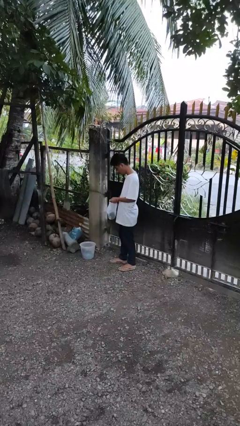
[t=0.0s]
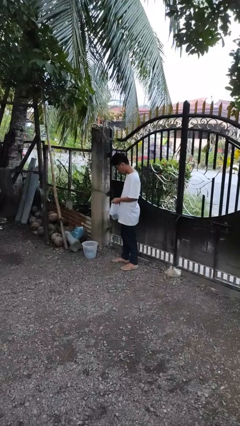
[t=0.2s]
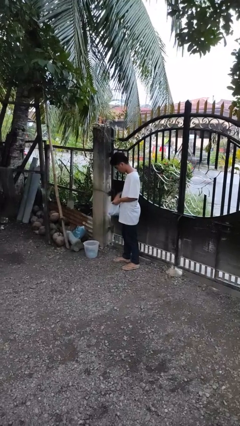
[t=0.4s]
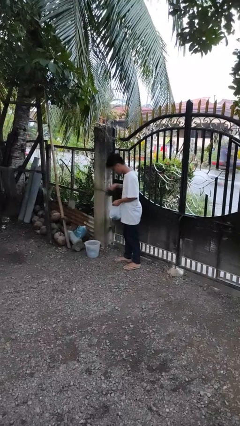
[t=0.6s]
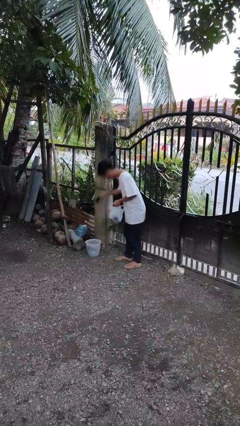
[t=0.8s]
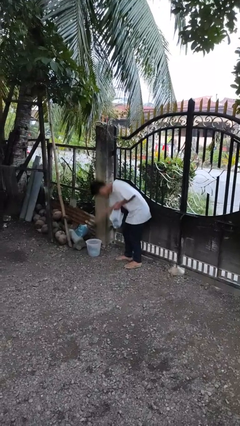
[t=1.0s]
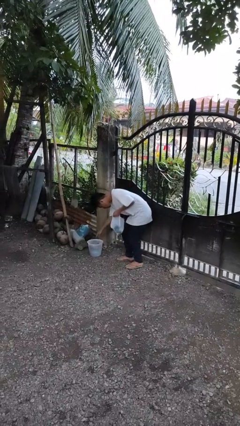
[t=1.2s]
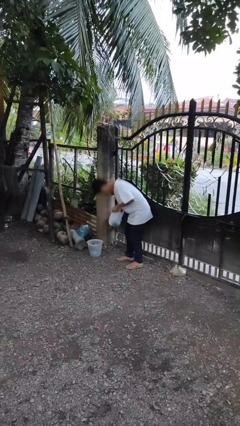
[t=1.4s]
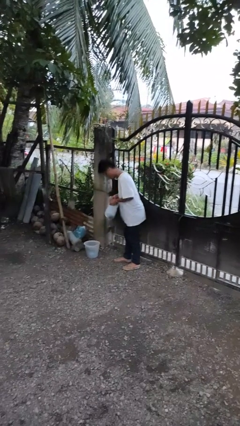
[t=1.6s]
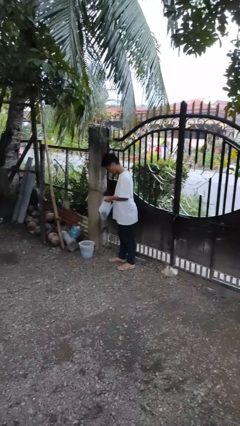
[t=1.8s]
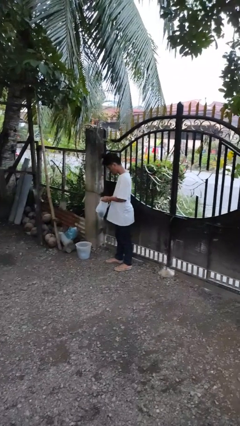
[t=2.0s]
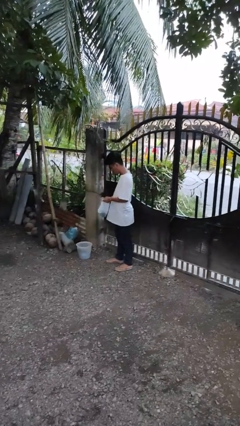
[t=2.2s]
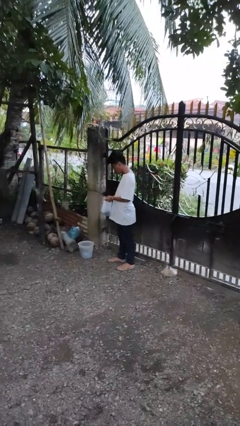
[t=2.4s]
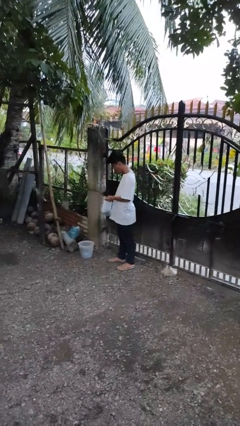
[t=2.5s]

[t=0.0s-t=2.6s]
person discards trash

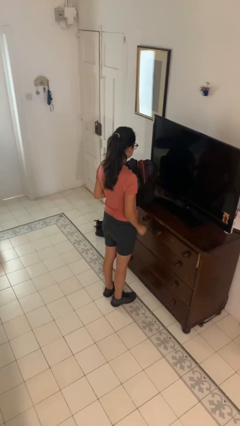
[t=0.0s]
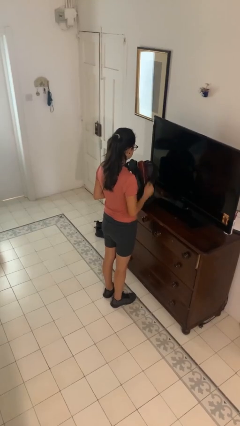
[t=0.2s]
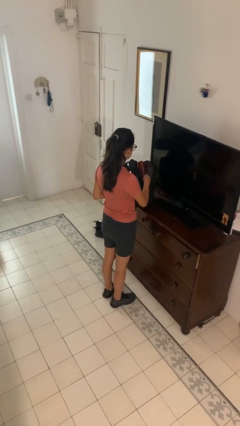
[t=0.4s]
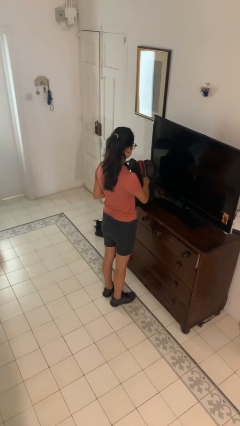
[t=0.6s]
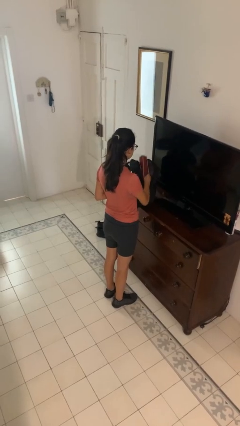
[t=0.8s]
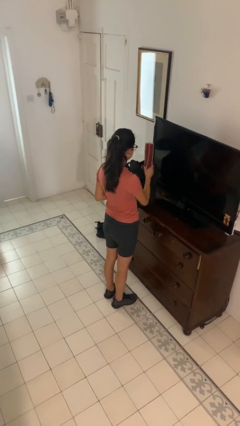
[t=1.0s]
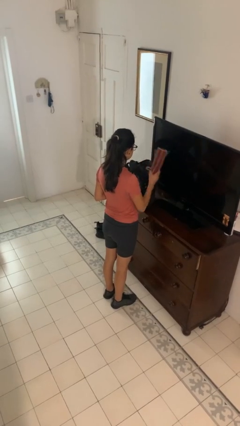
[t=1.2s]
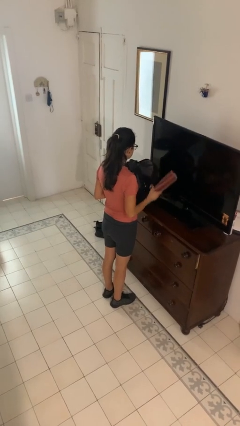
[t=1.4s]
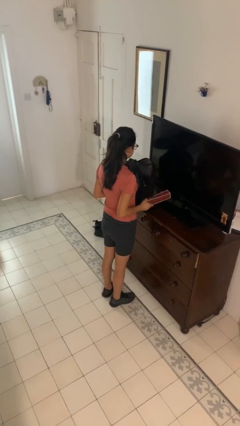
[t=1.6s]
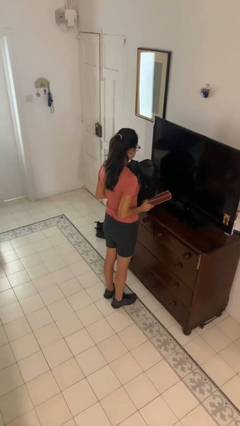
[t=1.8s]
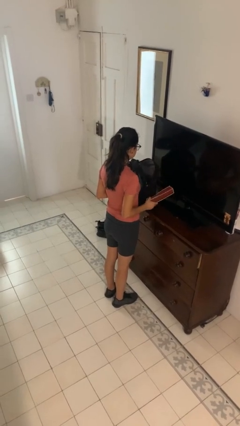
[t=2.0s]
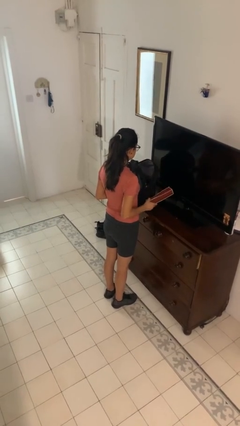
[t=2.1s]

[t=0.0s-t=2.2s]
person takes object from bag

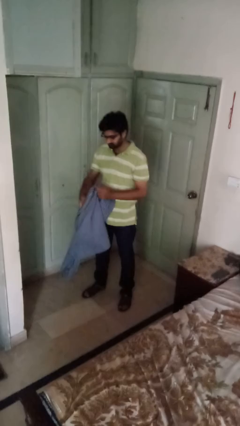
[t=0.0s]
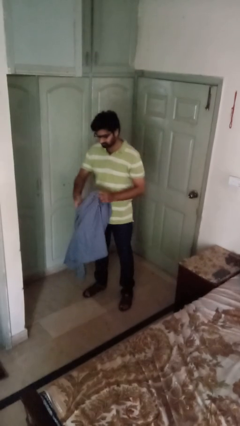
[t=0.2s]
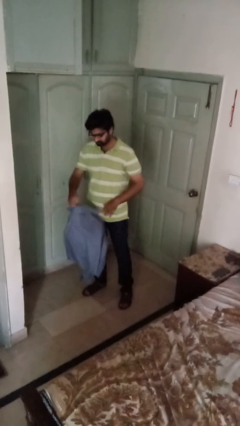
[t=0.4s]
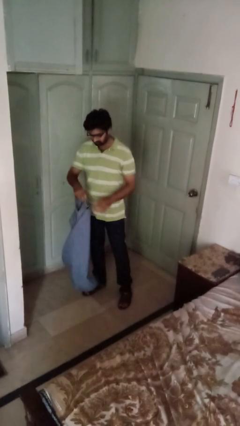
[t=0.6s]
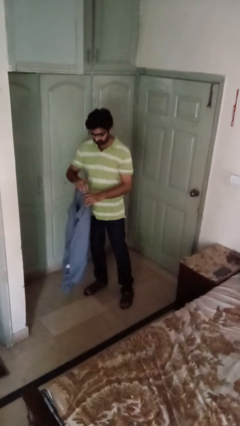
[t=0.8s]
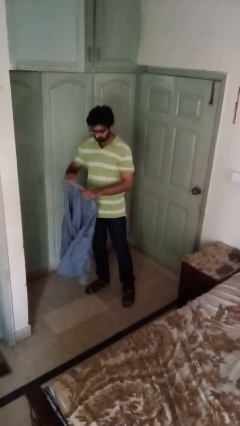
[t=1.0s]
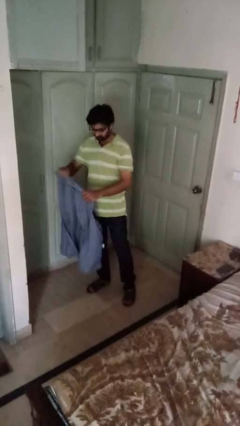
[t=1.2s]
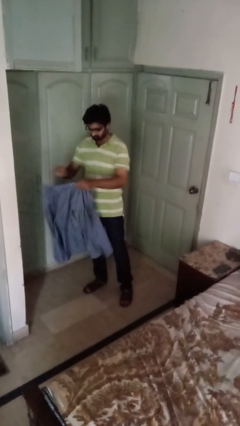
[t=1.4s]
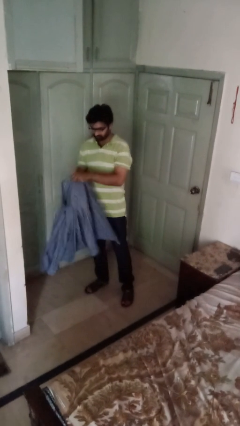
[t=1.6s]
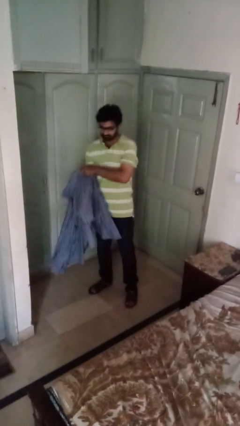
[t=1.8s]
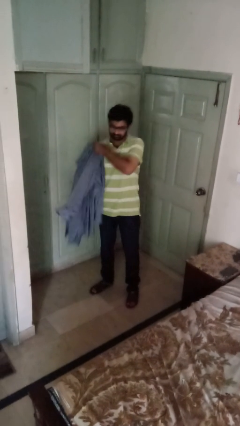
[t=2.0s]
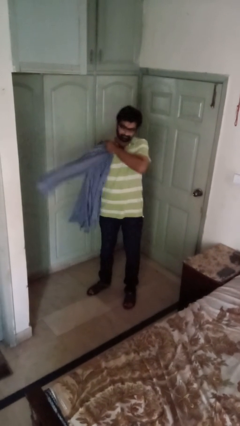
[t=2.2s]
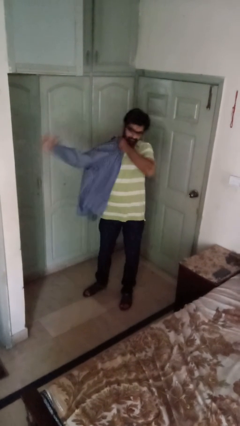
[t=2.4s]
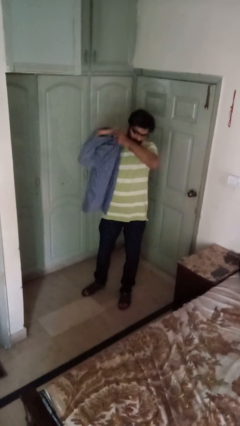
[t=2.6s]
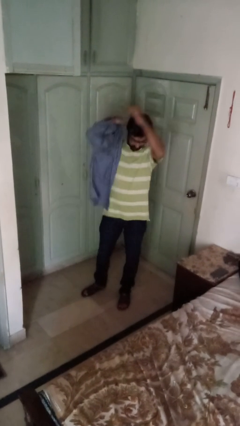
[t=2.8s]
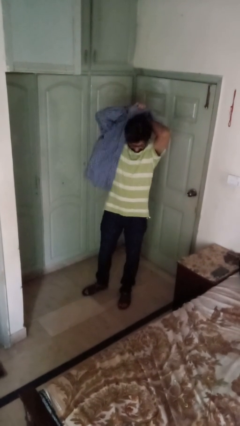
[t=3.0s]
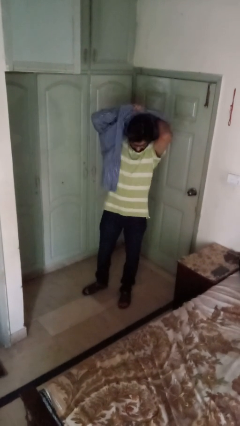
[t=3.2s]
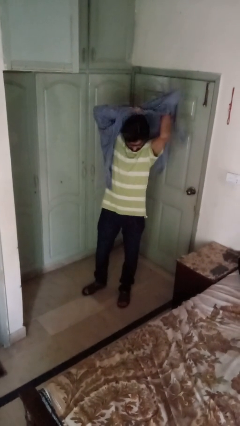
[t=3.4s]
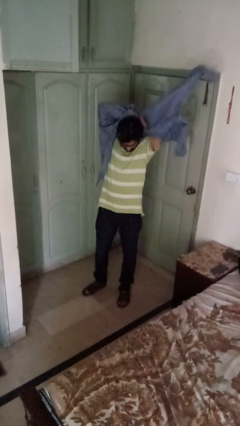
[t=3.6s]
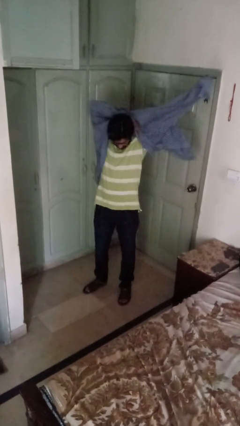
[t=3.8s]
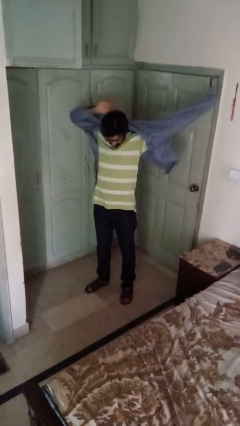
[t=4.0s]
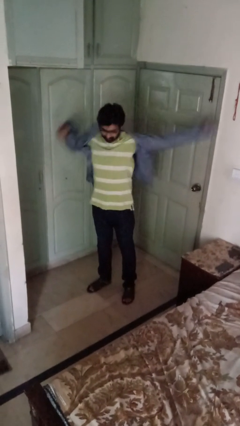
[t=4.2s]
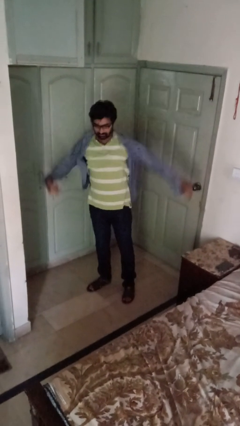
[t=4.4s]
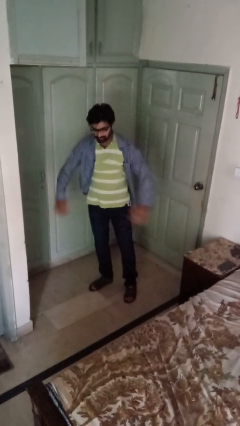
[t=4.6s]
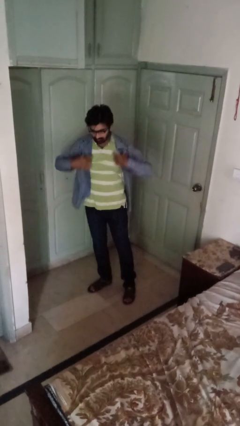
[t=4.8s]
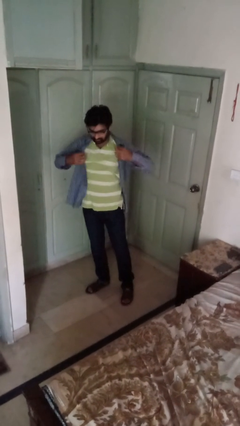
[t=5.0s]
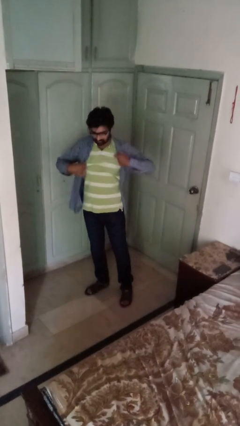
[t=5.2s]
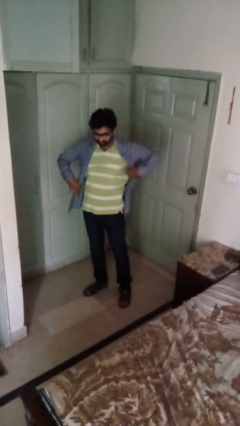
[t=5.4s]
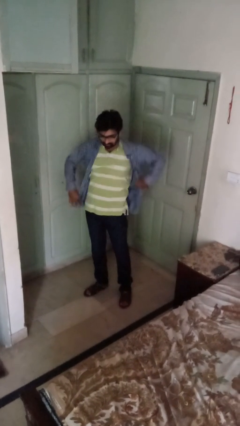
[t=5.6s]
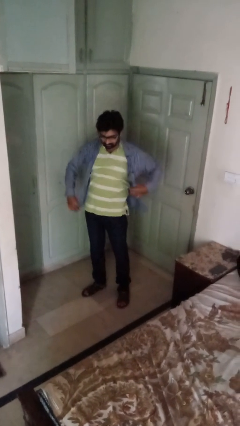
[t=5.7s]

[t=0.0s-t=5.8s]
person puts on shirt

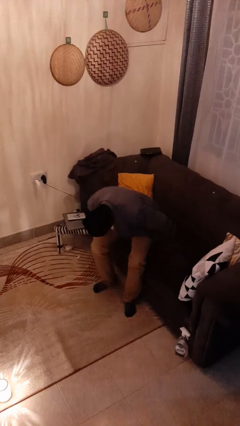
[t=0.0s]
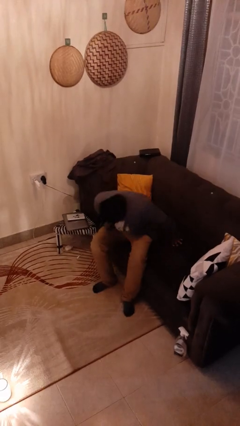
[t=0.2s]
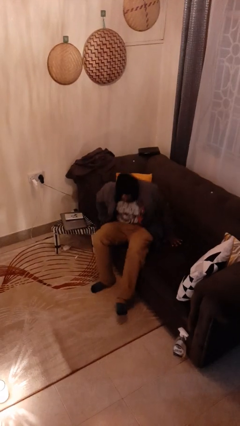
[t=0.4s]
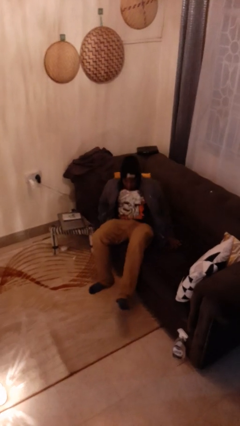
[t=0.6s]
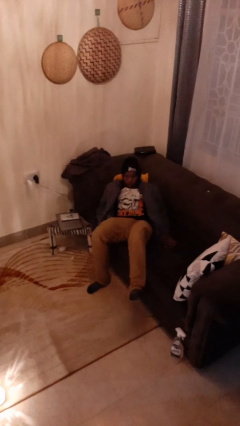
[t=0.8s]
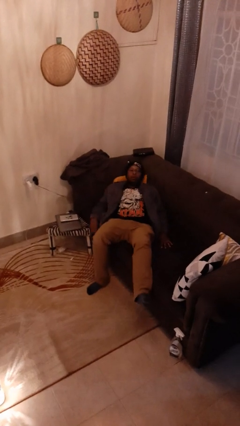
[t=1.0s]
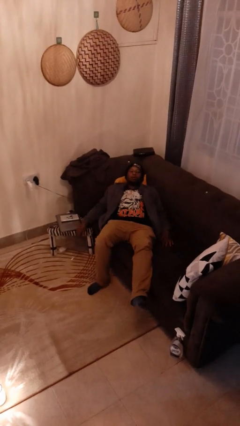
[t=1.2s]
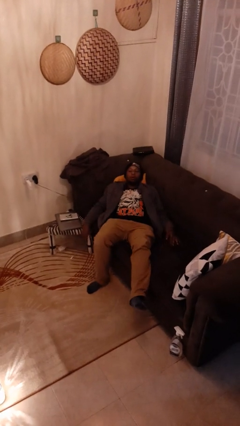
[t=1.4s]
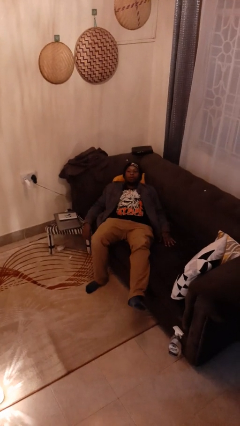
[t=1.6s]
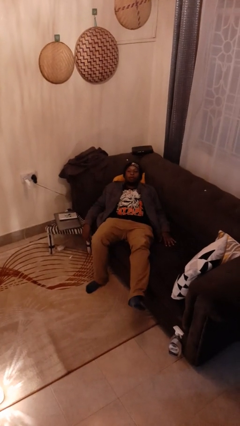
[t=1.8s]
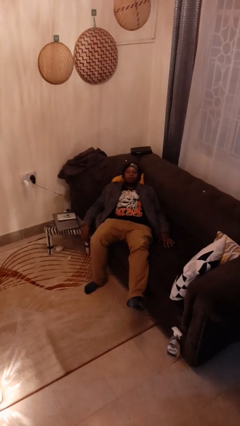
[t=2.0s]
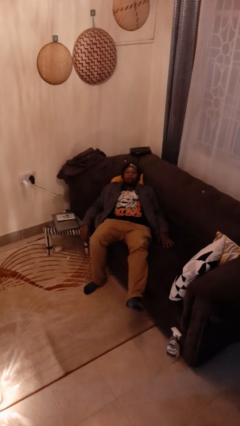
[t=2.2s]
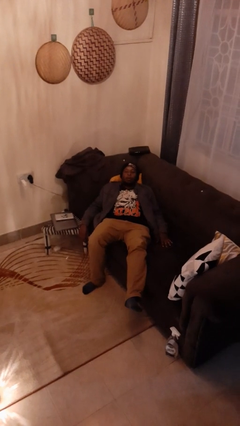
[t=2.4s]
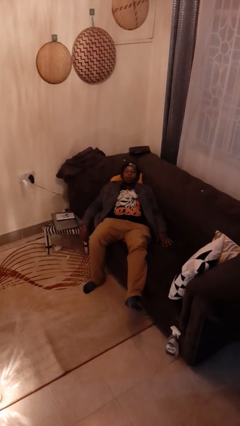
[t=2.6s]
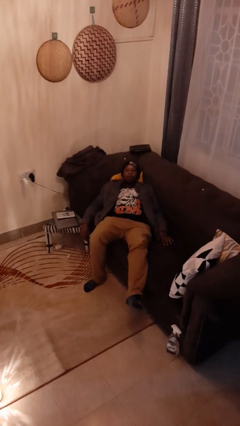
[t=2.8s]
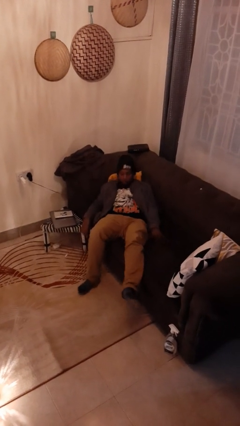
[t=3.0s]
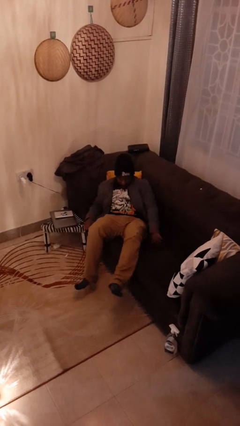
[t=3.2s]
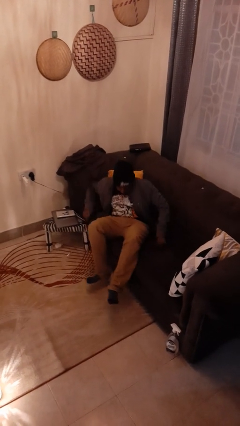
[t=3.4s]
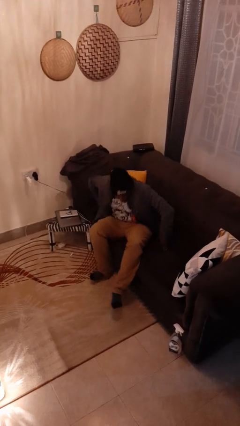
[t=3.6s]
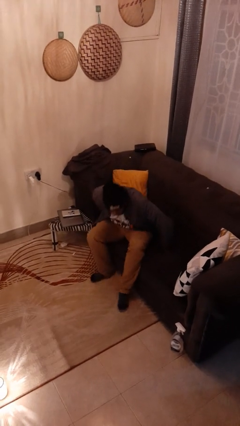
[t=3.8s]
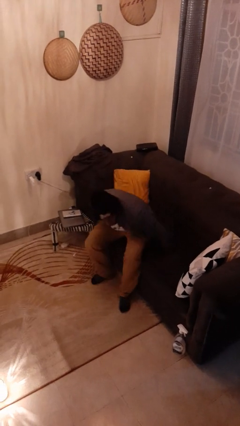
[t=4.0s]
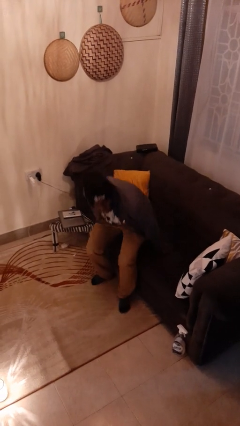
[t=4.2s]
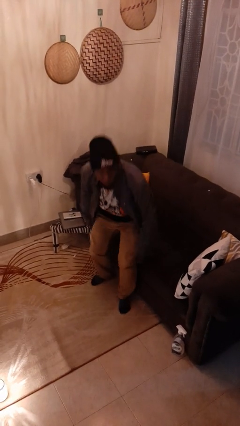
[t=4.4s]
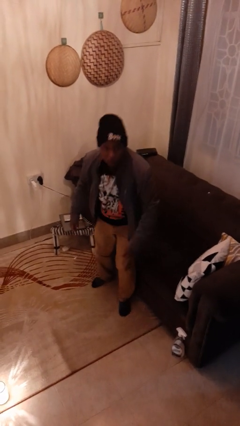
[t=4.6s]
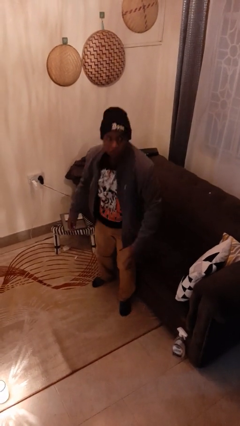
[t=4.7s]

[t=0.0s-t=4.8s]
person lies down on couch

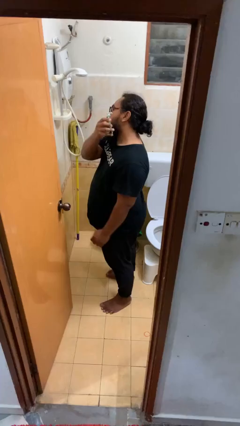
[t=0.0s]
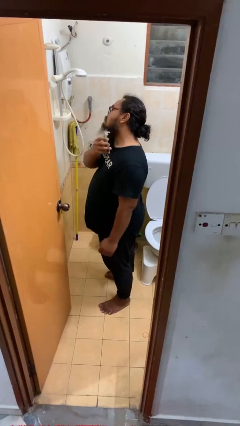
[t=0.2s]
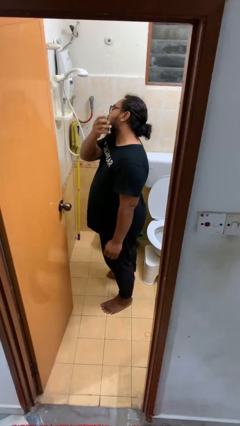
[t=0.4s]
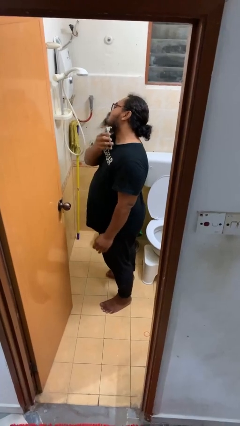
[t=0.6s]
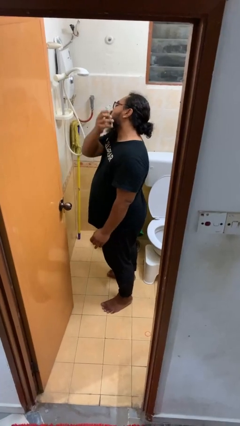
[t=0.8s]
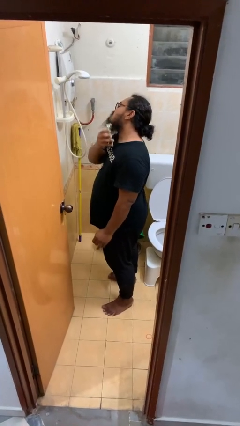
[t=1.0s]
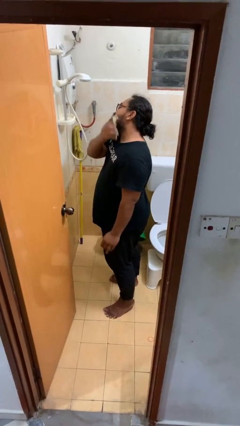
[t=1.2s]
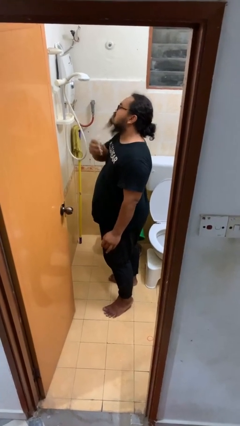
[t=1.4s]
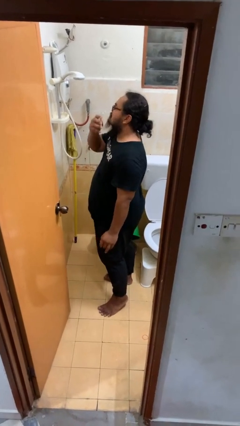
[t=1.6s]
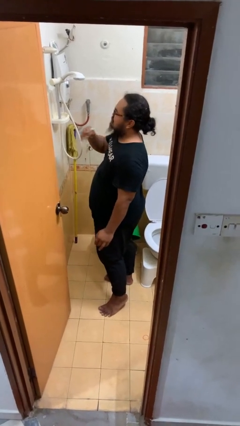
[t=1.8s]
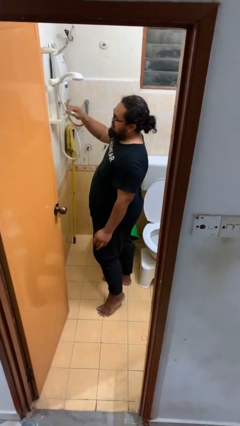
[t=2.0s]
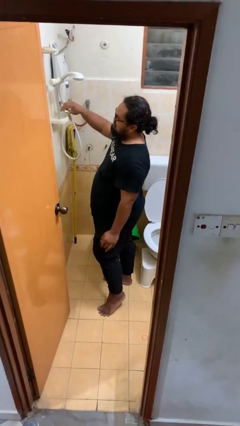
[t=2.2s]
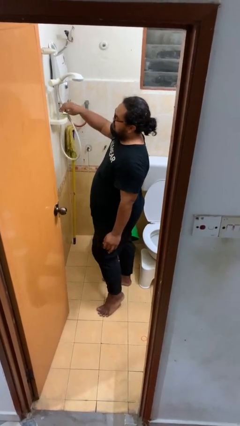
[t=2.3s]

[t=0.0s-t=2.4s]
person shaves face
